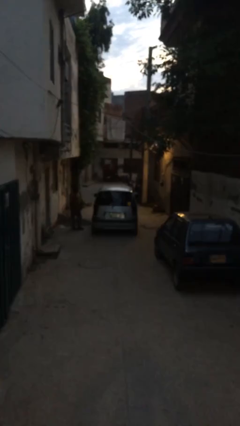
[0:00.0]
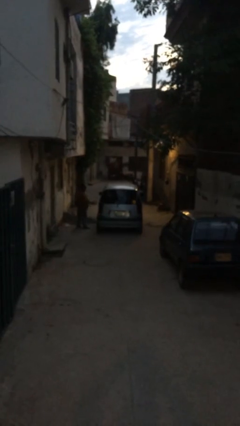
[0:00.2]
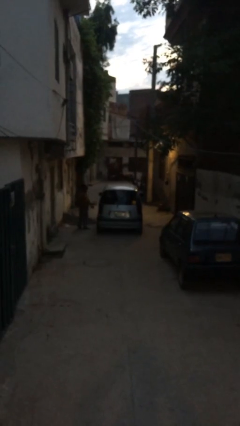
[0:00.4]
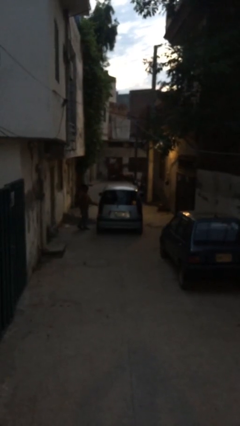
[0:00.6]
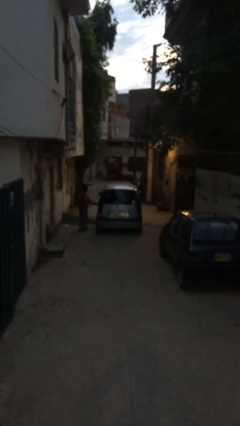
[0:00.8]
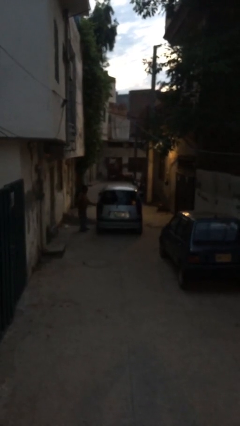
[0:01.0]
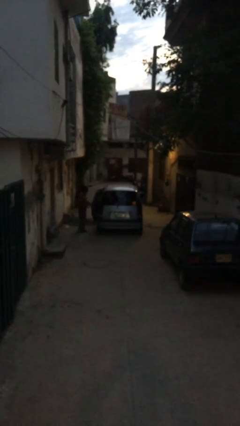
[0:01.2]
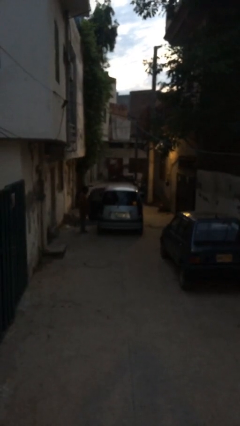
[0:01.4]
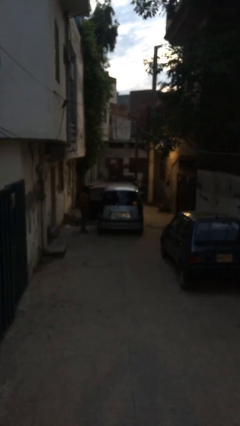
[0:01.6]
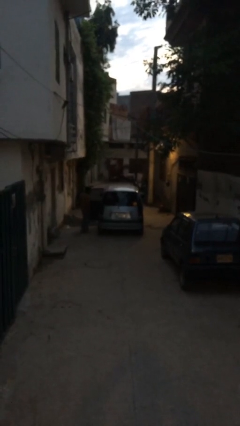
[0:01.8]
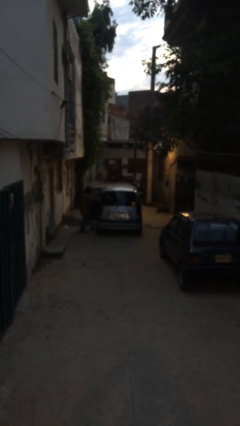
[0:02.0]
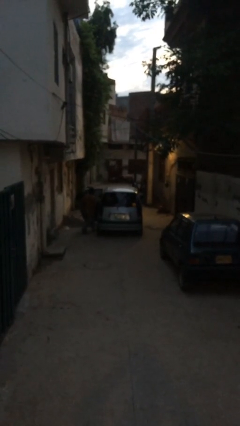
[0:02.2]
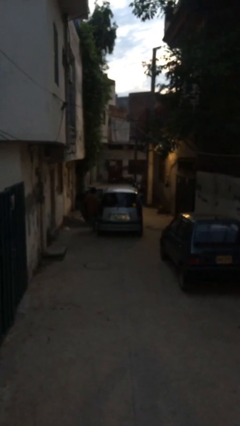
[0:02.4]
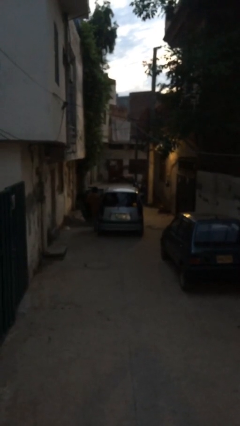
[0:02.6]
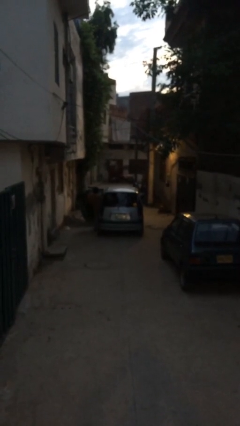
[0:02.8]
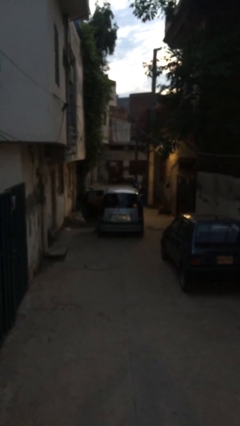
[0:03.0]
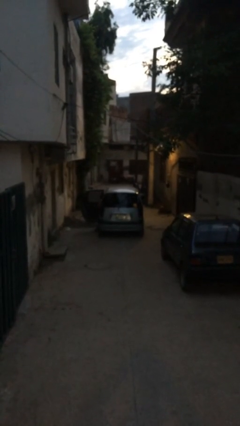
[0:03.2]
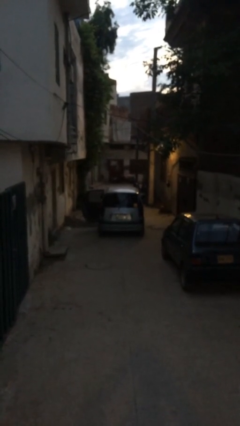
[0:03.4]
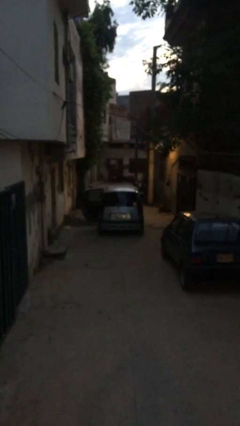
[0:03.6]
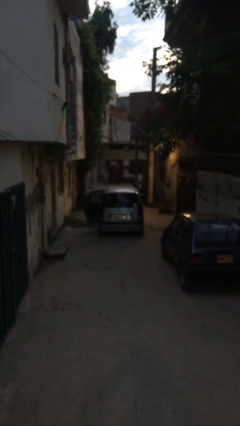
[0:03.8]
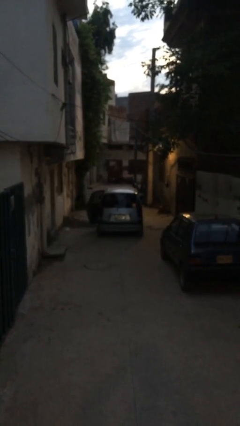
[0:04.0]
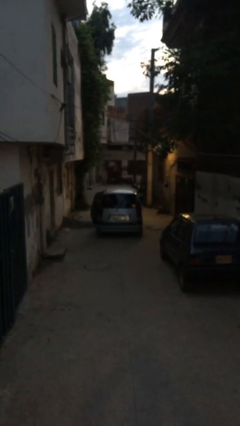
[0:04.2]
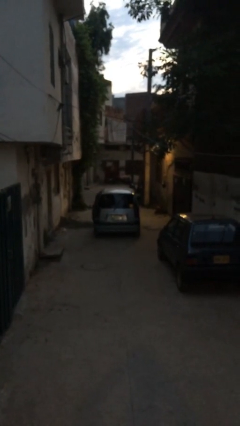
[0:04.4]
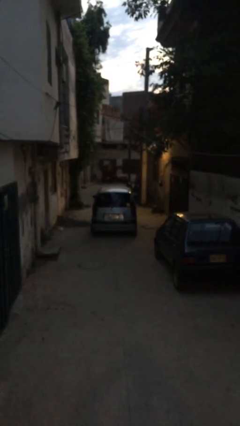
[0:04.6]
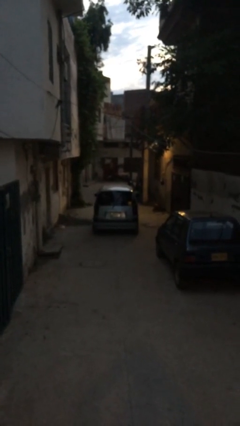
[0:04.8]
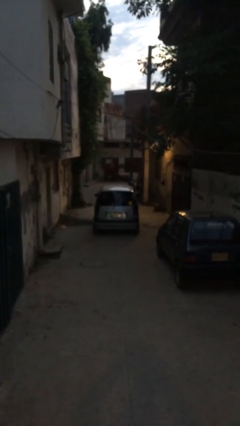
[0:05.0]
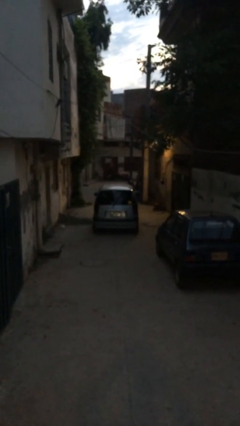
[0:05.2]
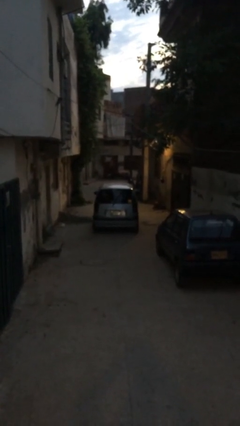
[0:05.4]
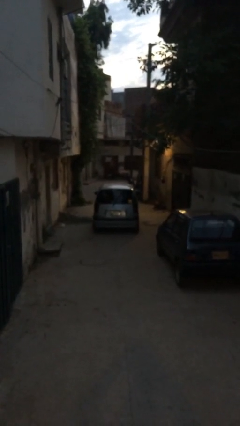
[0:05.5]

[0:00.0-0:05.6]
car picks up person

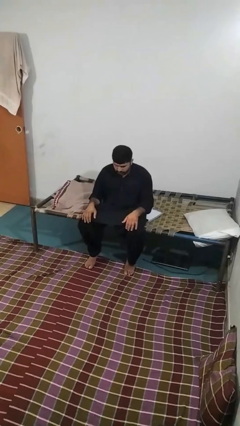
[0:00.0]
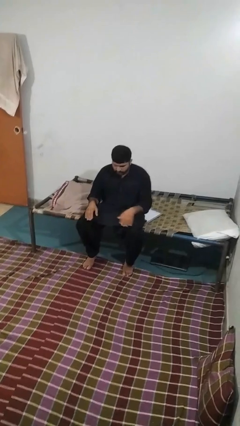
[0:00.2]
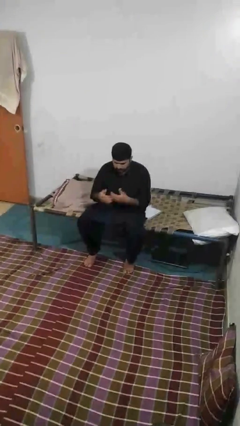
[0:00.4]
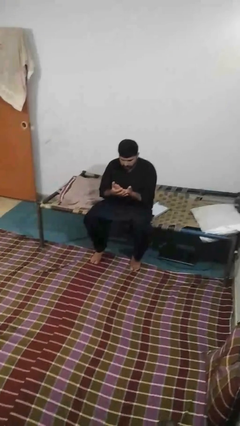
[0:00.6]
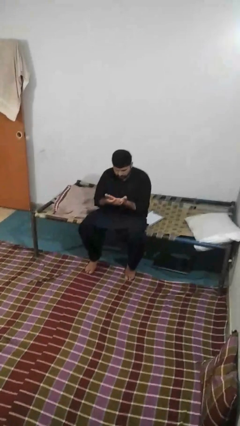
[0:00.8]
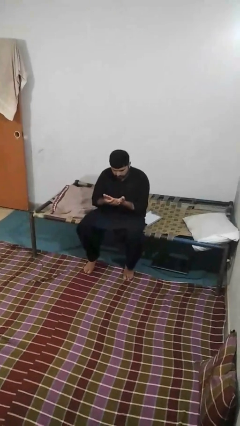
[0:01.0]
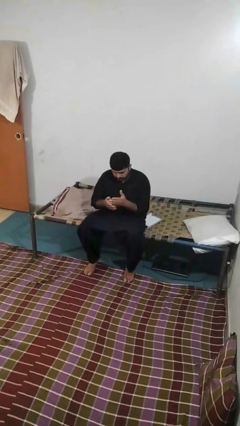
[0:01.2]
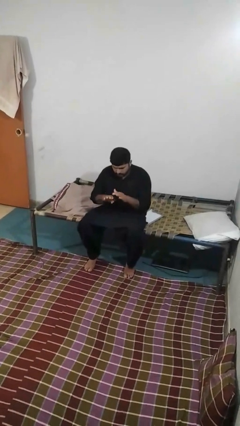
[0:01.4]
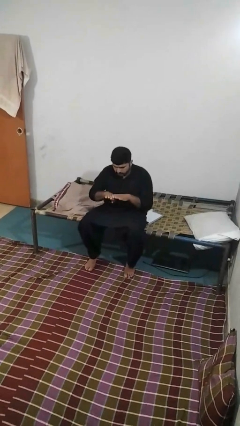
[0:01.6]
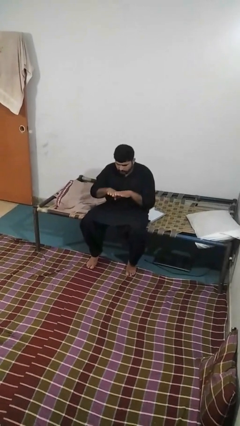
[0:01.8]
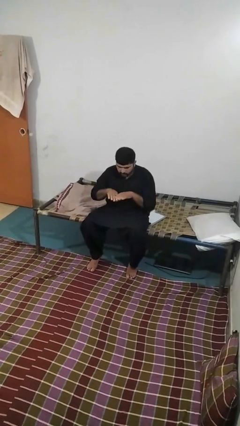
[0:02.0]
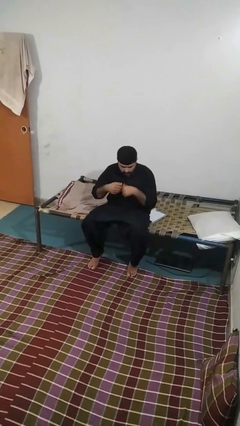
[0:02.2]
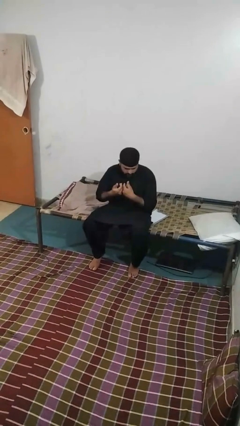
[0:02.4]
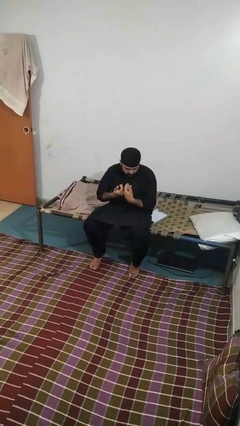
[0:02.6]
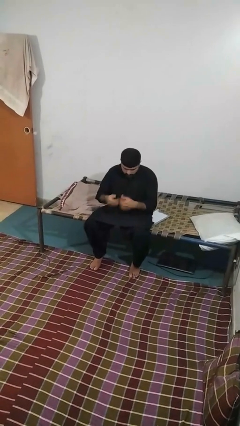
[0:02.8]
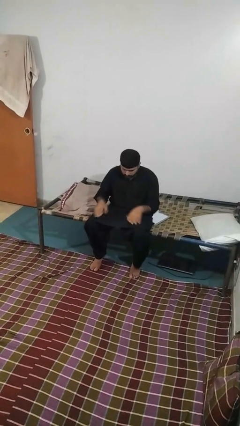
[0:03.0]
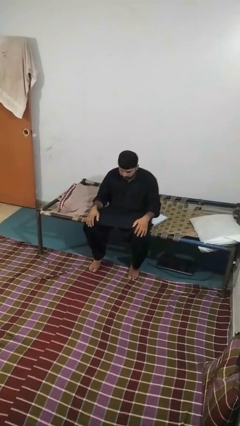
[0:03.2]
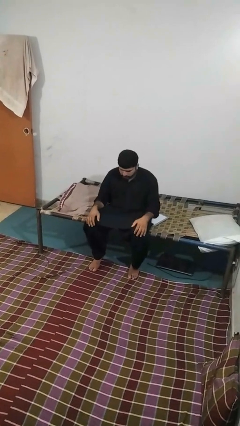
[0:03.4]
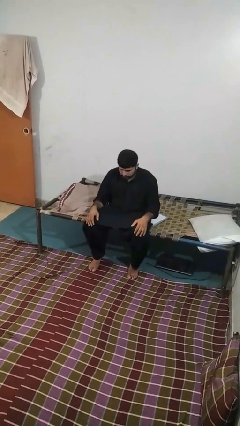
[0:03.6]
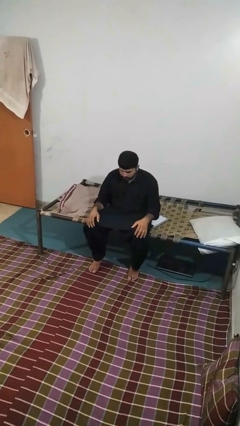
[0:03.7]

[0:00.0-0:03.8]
person looks at hands in lap

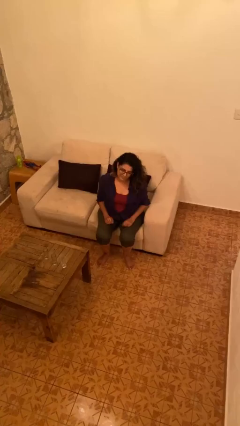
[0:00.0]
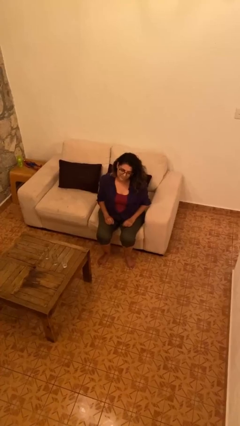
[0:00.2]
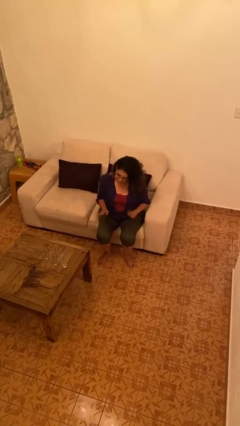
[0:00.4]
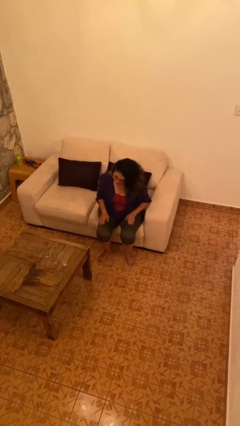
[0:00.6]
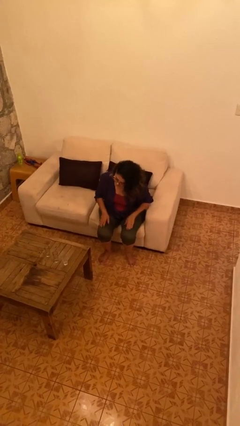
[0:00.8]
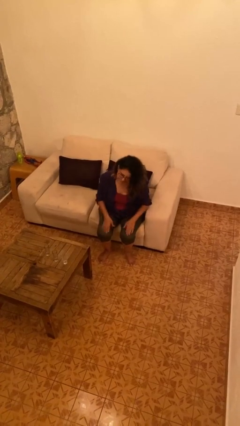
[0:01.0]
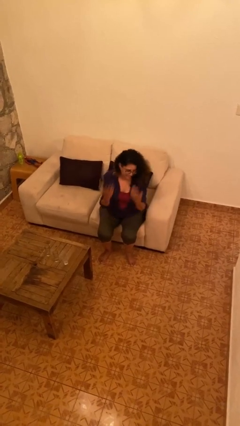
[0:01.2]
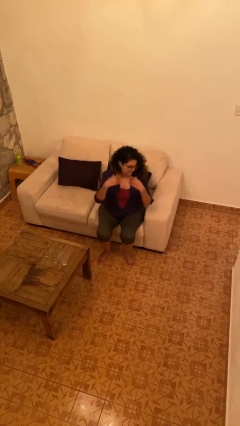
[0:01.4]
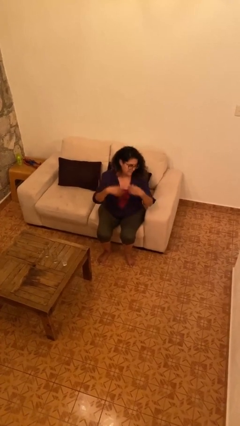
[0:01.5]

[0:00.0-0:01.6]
person slaps hands on thighs

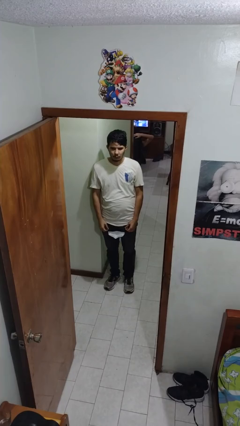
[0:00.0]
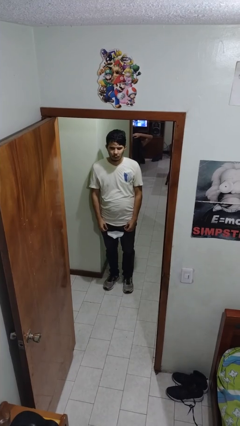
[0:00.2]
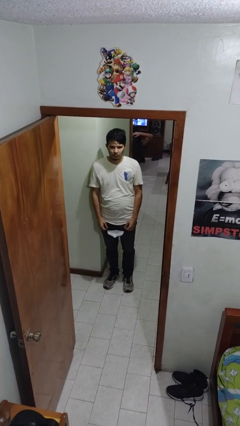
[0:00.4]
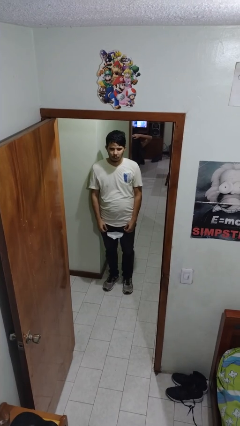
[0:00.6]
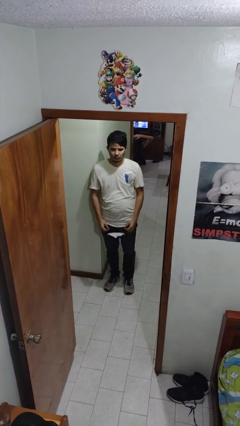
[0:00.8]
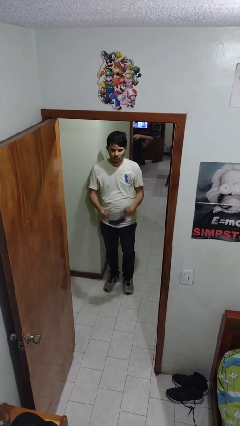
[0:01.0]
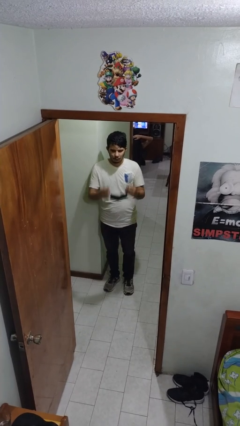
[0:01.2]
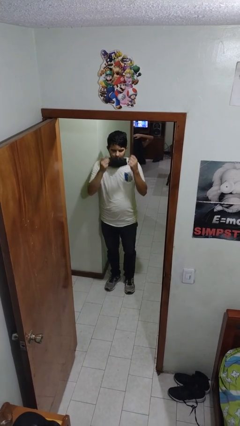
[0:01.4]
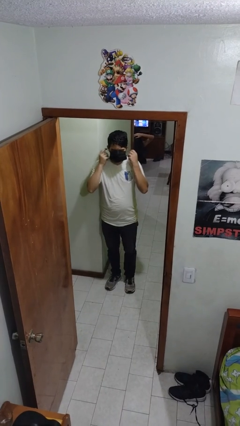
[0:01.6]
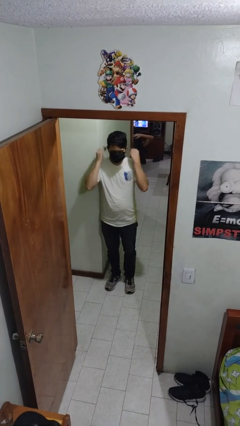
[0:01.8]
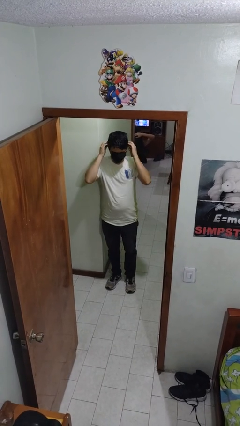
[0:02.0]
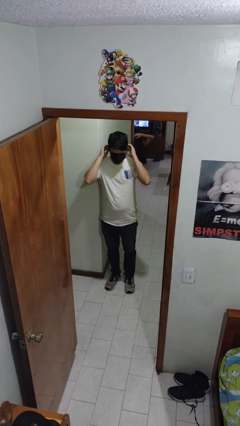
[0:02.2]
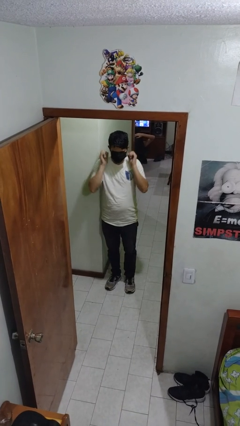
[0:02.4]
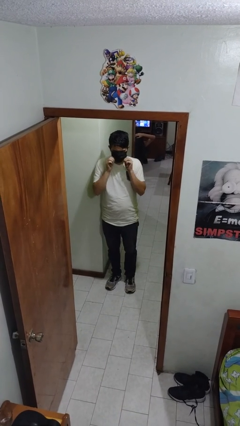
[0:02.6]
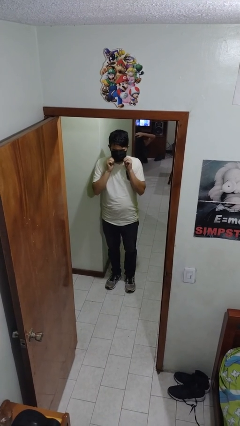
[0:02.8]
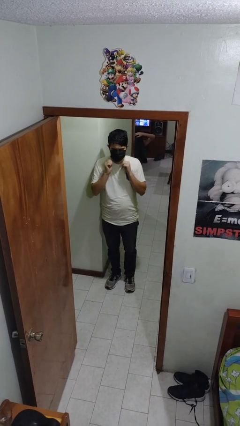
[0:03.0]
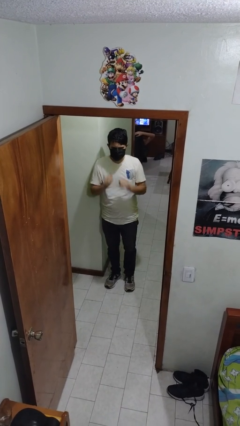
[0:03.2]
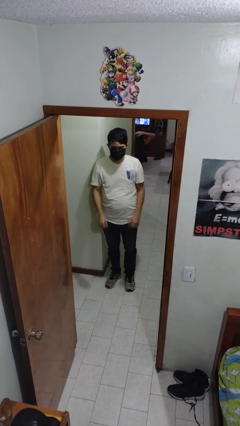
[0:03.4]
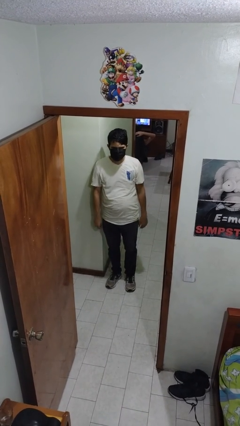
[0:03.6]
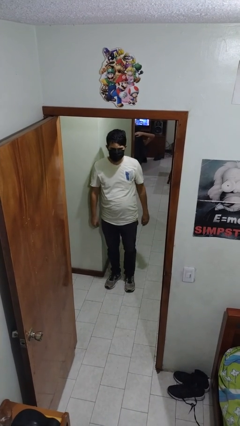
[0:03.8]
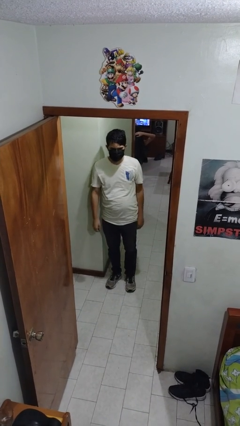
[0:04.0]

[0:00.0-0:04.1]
person puts on facemask

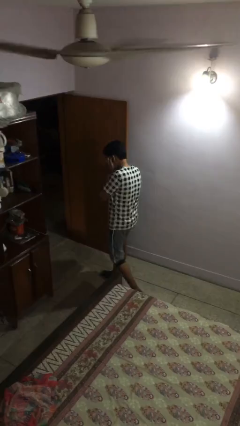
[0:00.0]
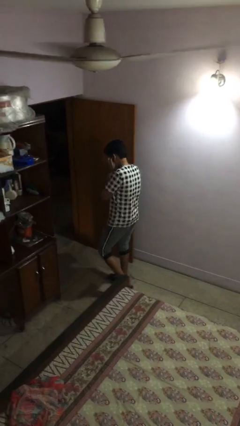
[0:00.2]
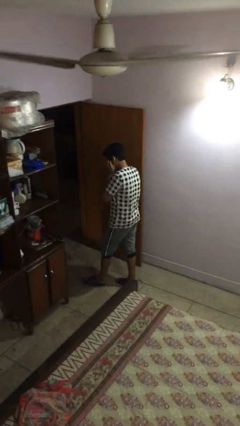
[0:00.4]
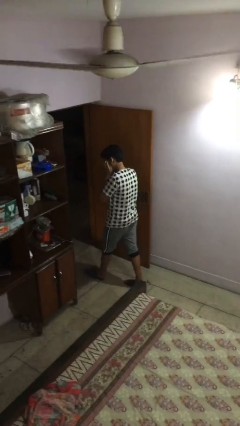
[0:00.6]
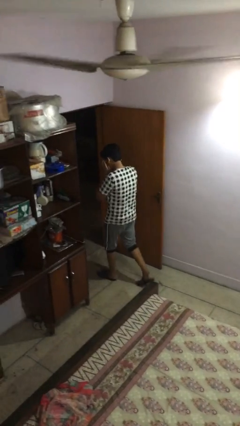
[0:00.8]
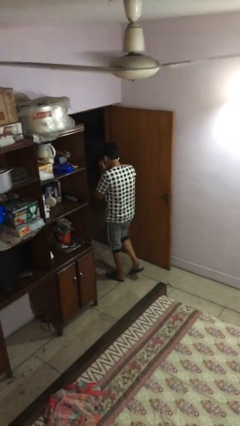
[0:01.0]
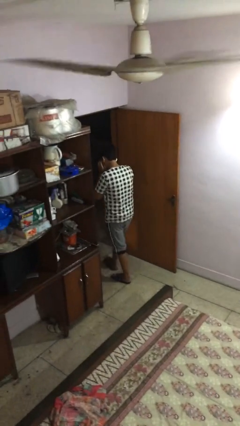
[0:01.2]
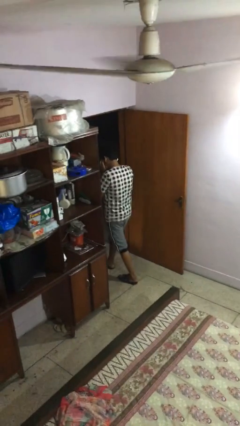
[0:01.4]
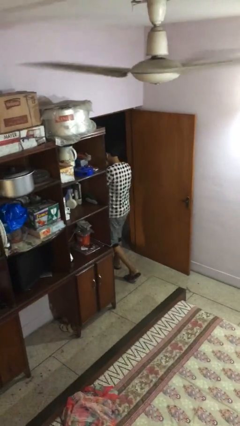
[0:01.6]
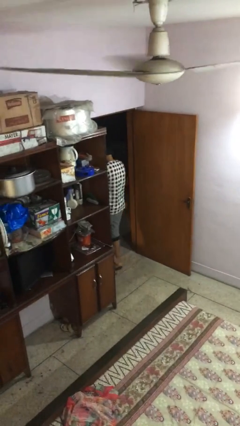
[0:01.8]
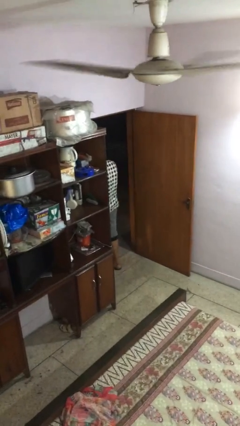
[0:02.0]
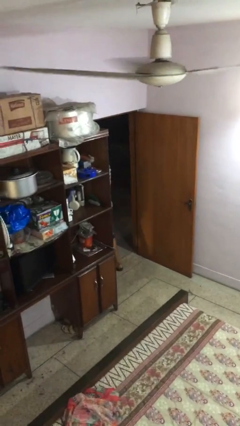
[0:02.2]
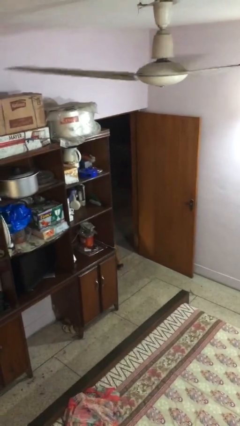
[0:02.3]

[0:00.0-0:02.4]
person exits scene through structure
